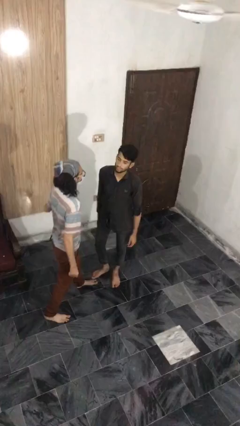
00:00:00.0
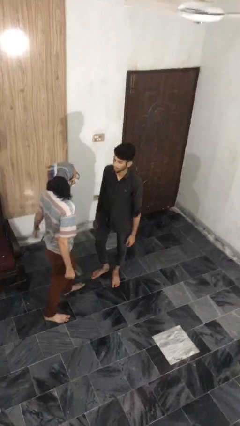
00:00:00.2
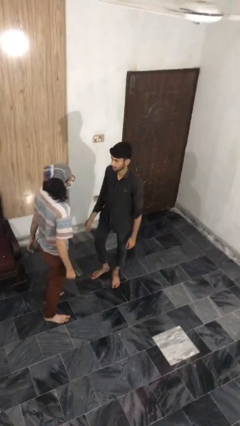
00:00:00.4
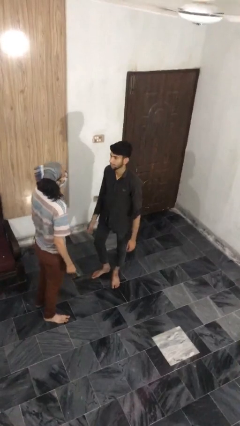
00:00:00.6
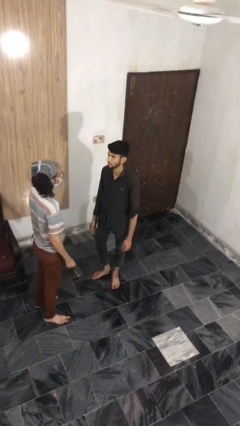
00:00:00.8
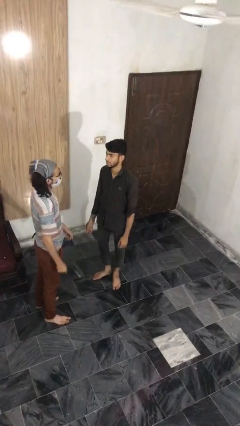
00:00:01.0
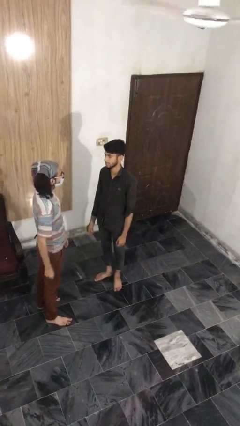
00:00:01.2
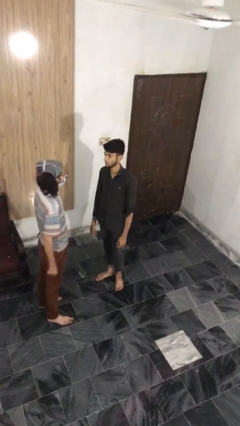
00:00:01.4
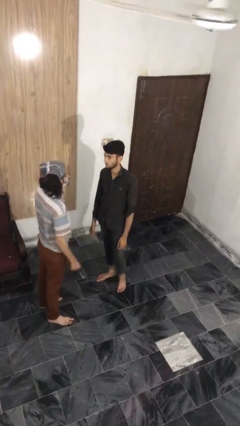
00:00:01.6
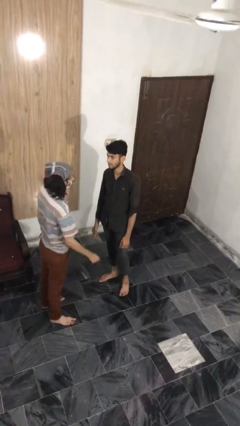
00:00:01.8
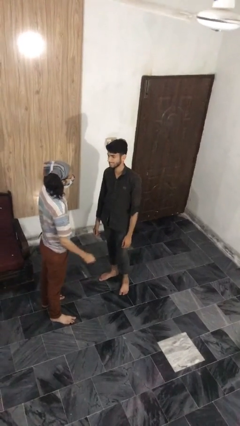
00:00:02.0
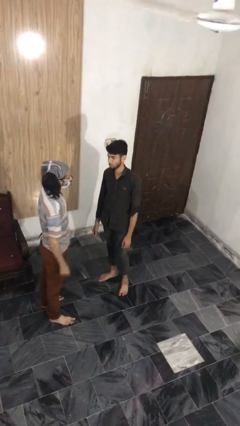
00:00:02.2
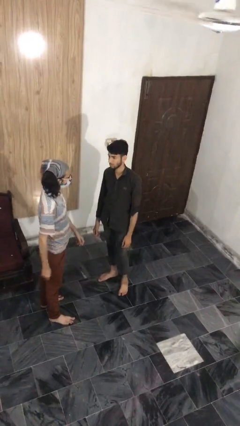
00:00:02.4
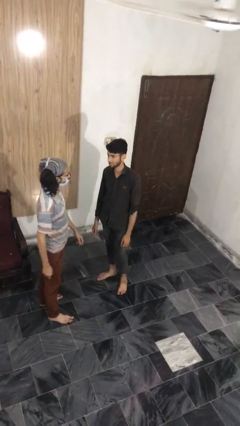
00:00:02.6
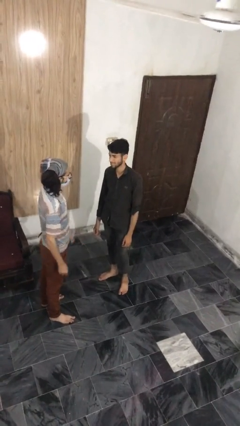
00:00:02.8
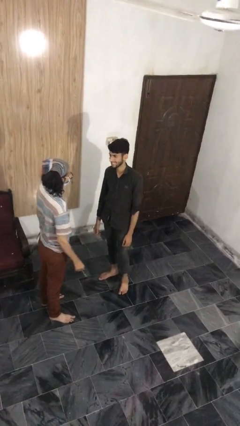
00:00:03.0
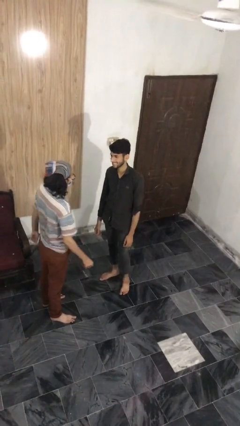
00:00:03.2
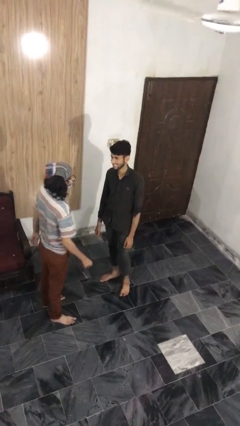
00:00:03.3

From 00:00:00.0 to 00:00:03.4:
person talks to person

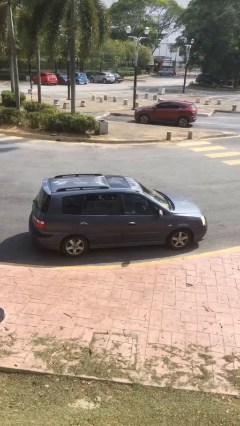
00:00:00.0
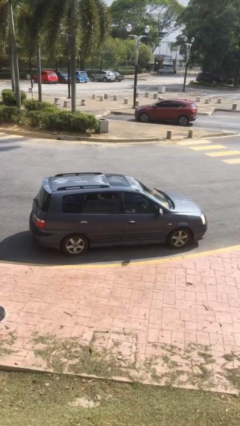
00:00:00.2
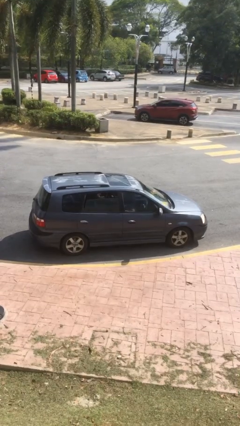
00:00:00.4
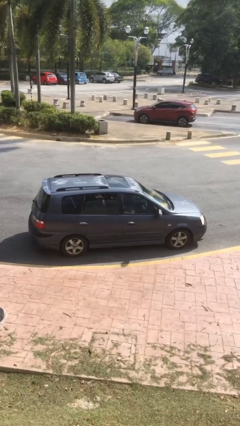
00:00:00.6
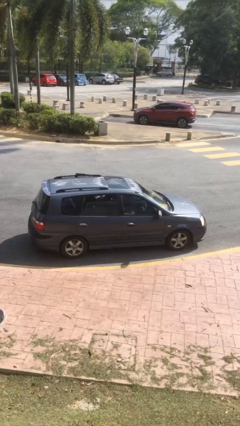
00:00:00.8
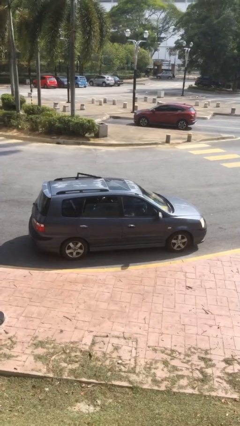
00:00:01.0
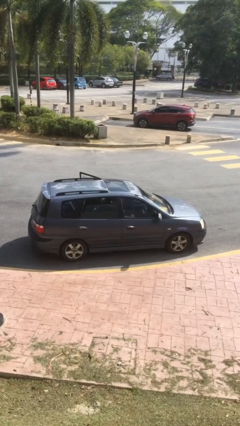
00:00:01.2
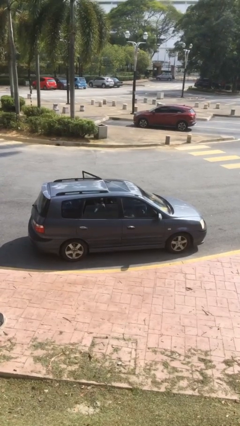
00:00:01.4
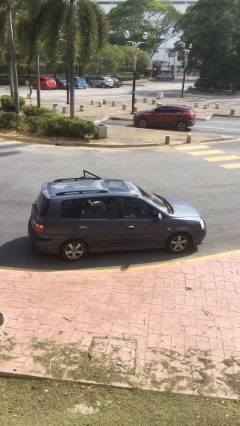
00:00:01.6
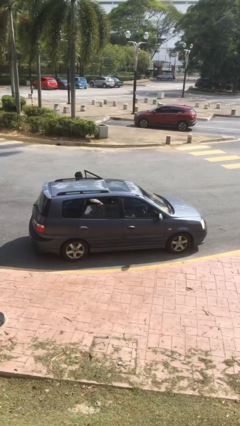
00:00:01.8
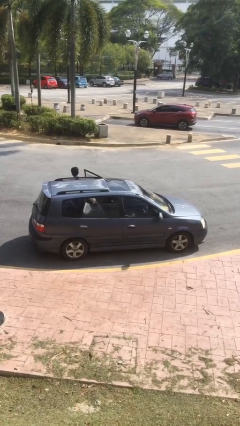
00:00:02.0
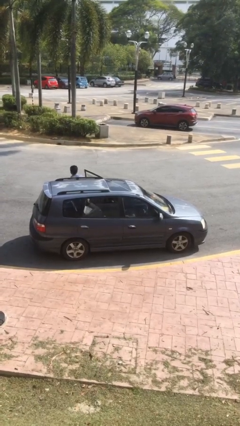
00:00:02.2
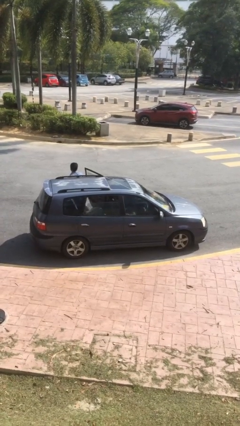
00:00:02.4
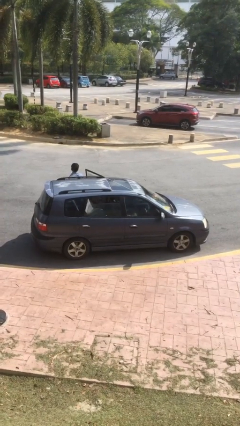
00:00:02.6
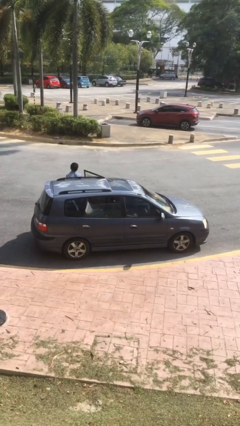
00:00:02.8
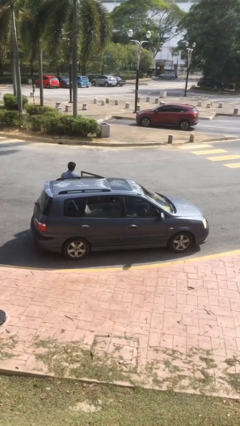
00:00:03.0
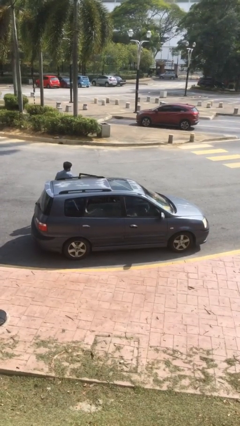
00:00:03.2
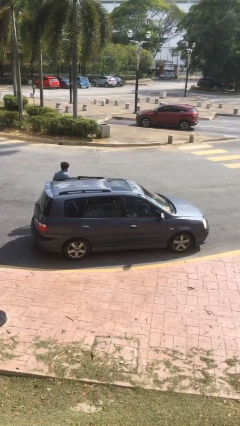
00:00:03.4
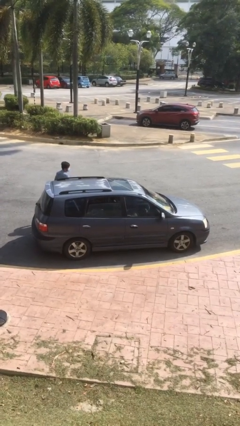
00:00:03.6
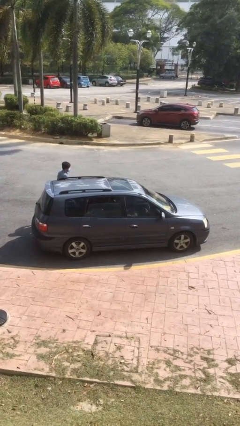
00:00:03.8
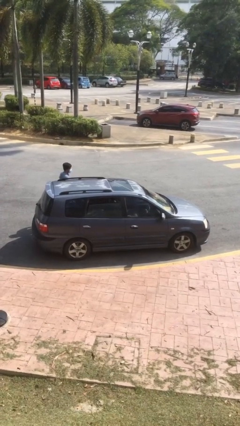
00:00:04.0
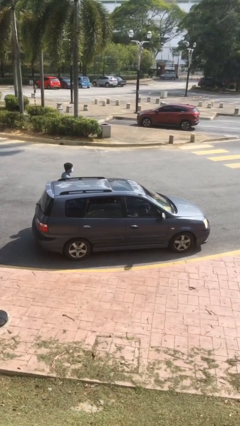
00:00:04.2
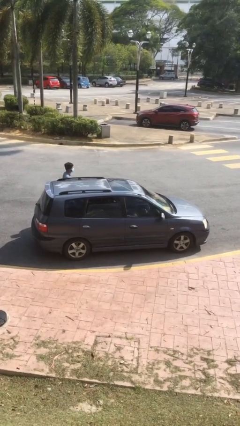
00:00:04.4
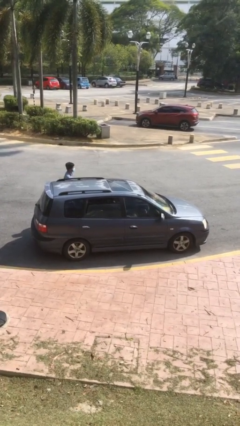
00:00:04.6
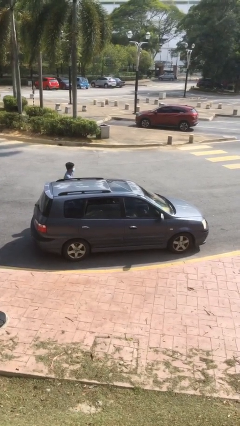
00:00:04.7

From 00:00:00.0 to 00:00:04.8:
car drops off person

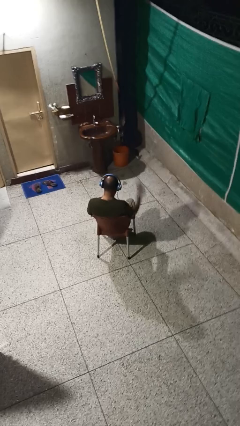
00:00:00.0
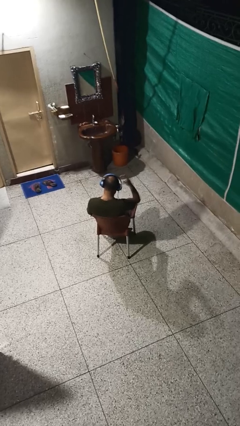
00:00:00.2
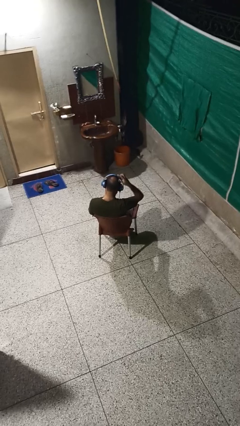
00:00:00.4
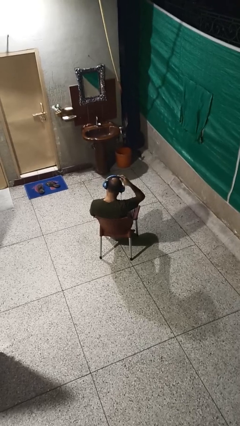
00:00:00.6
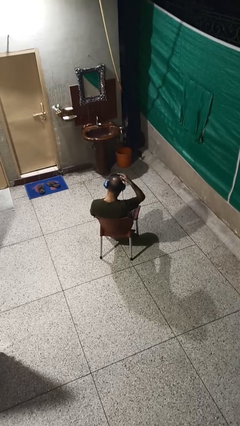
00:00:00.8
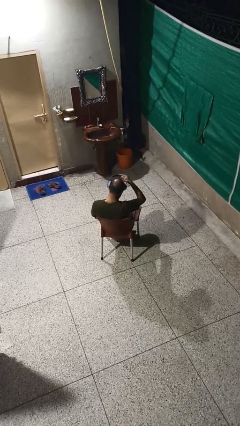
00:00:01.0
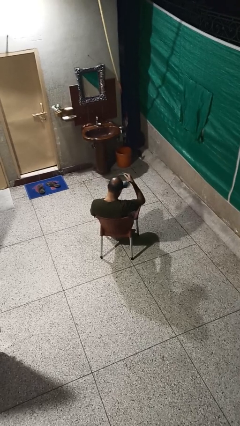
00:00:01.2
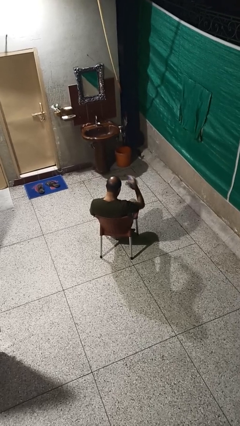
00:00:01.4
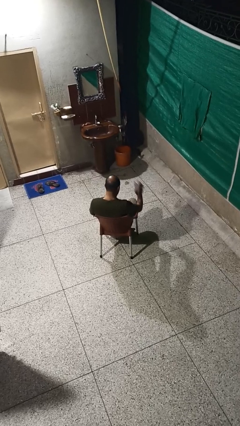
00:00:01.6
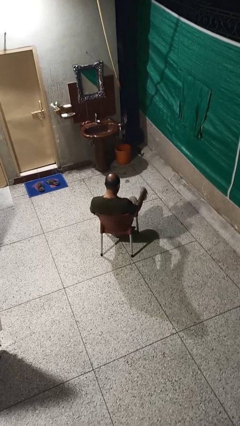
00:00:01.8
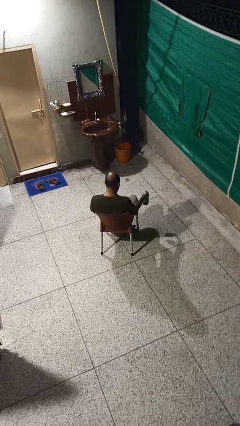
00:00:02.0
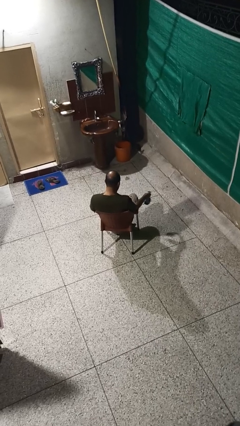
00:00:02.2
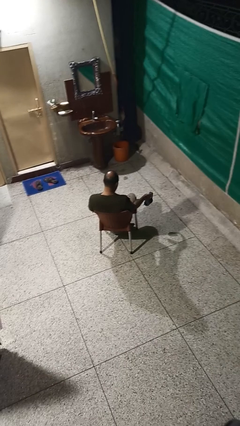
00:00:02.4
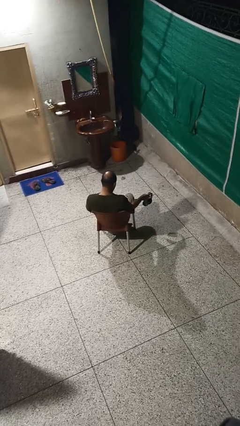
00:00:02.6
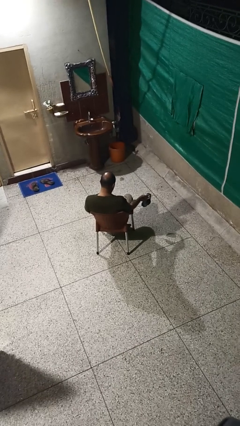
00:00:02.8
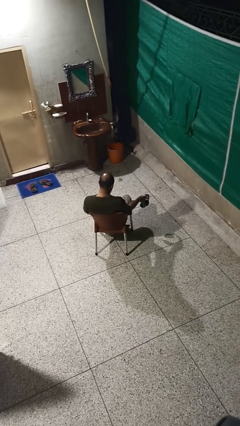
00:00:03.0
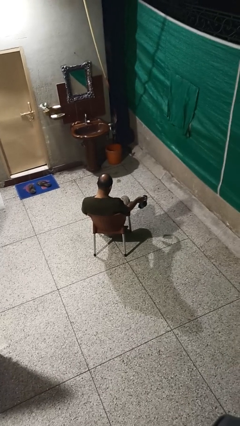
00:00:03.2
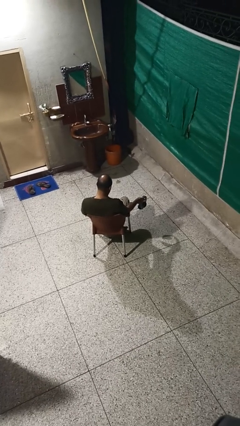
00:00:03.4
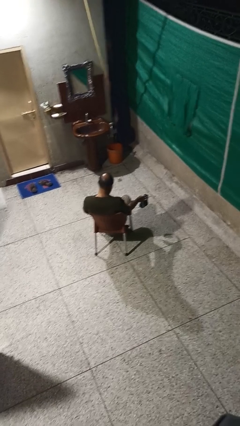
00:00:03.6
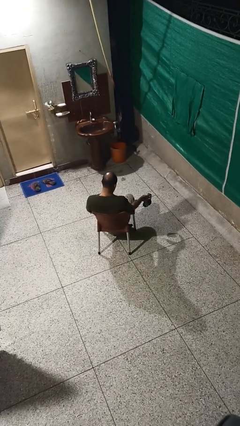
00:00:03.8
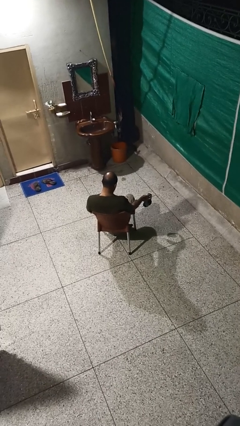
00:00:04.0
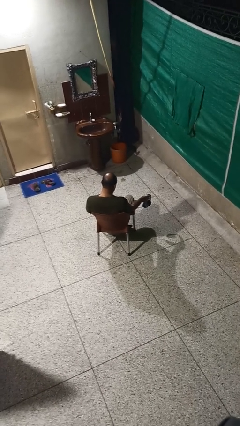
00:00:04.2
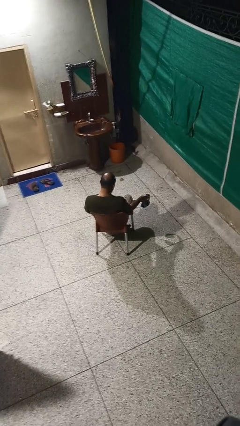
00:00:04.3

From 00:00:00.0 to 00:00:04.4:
person takes off headphones

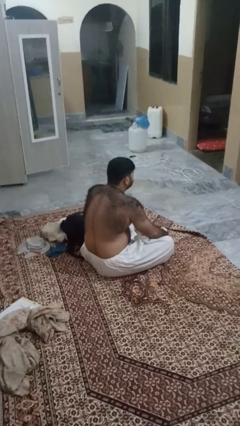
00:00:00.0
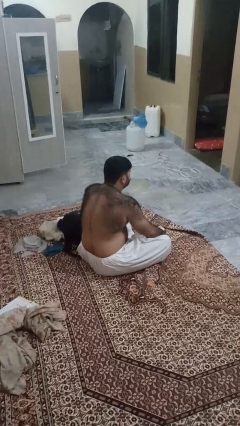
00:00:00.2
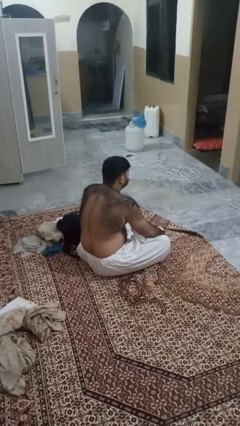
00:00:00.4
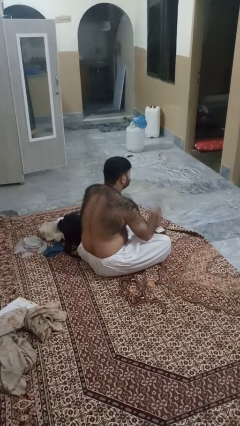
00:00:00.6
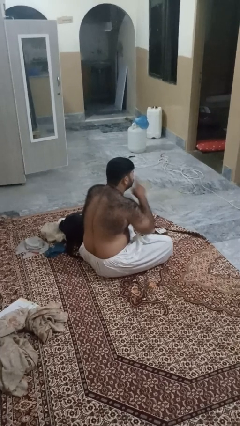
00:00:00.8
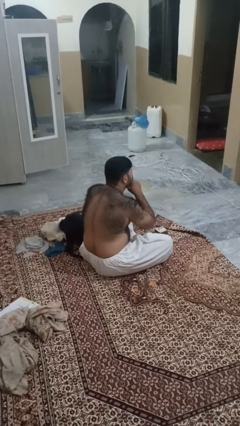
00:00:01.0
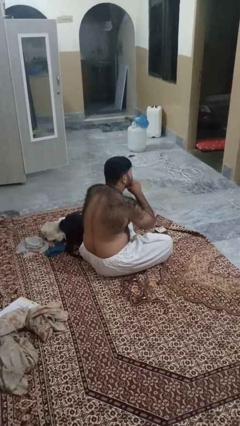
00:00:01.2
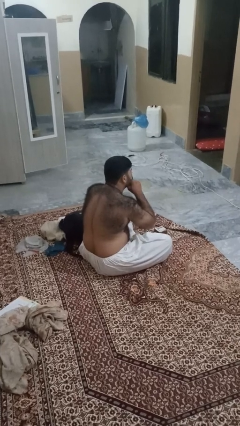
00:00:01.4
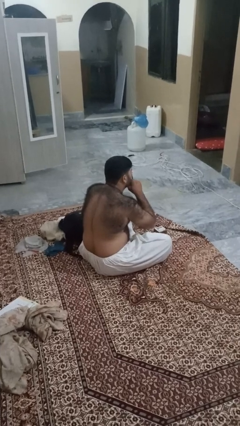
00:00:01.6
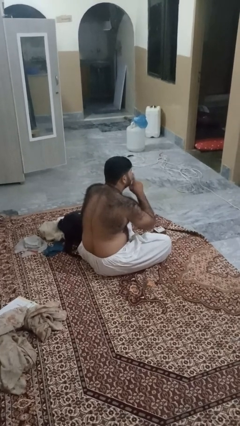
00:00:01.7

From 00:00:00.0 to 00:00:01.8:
person gestures be quiet

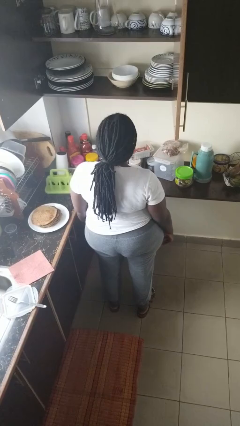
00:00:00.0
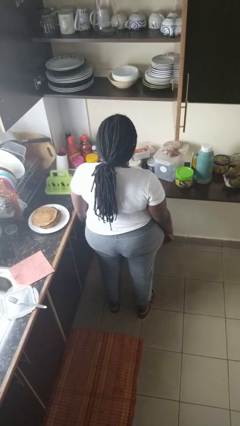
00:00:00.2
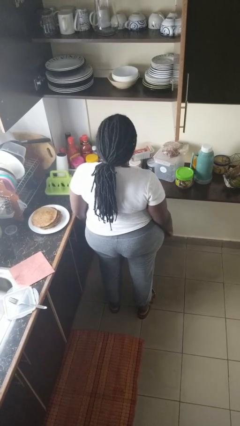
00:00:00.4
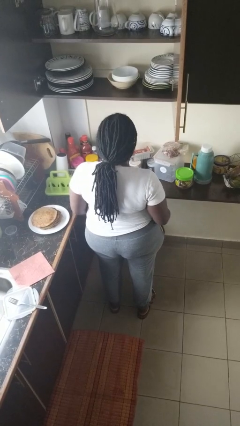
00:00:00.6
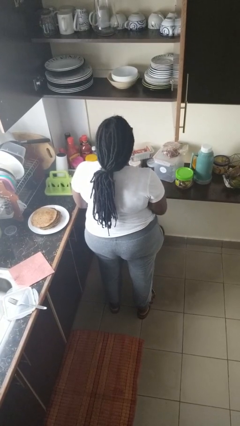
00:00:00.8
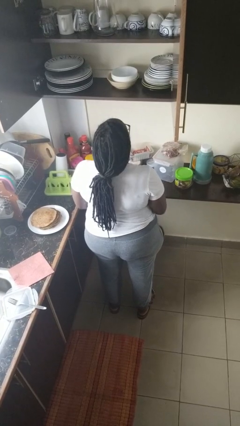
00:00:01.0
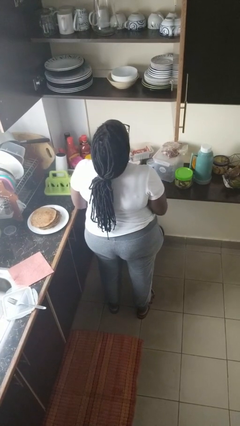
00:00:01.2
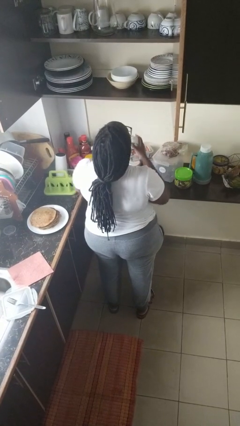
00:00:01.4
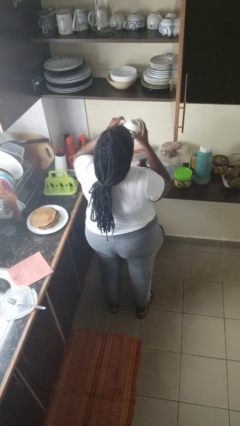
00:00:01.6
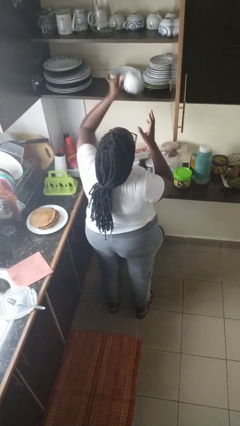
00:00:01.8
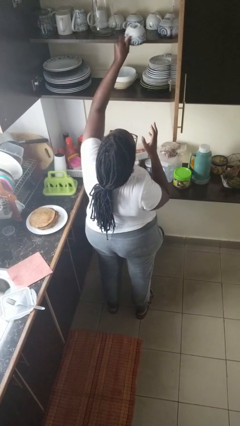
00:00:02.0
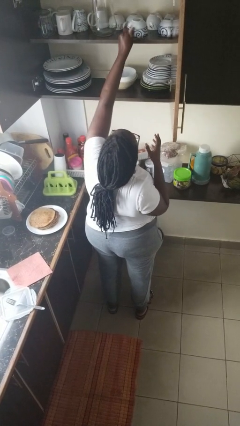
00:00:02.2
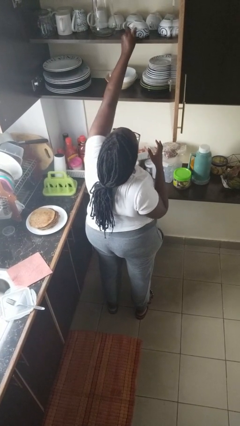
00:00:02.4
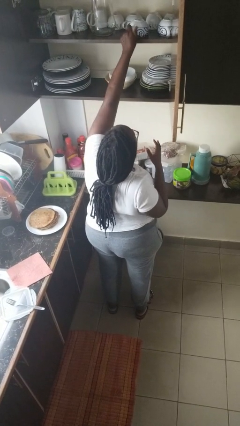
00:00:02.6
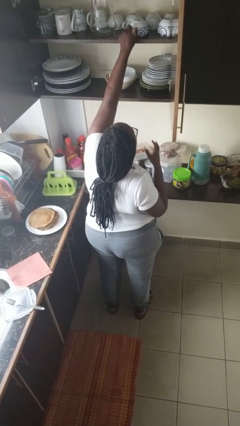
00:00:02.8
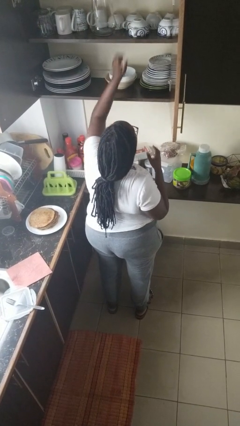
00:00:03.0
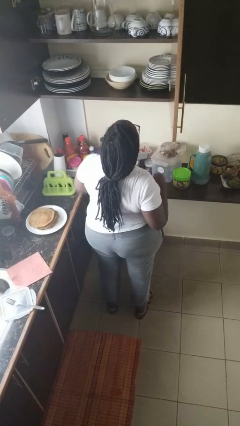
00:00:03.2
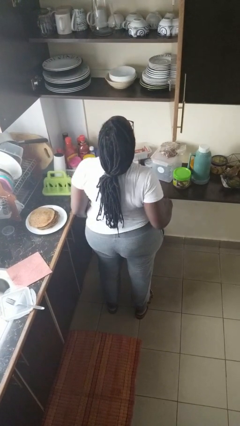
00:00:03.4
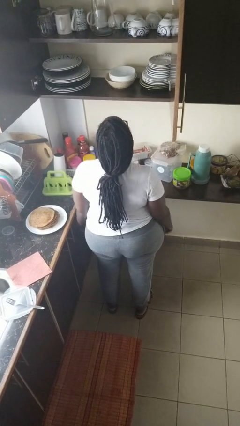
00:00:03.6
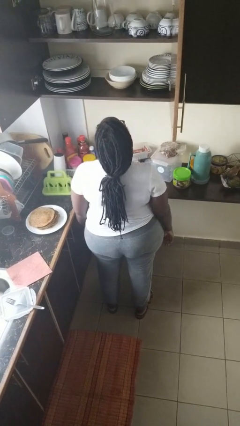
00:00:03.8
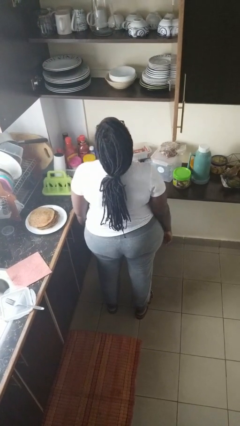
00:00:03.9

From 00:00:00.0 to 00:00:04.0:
person puts object in cabinet
